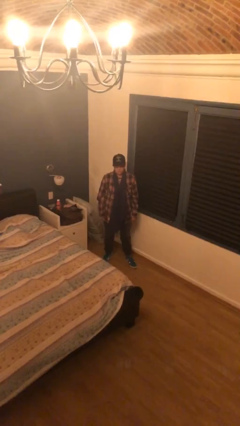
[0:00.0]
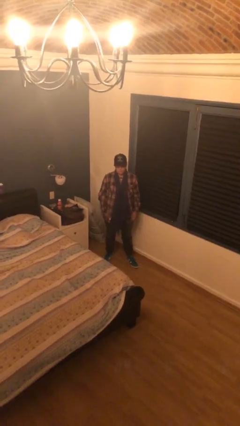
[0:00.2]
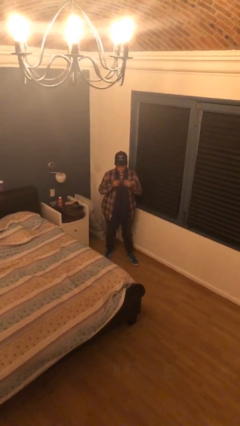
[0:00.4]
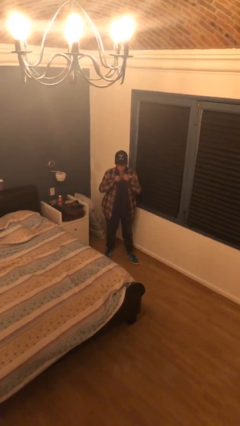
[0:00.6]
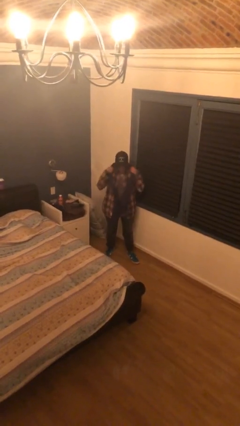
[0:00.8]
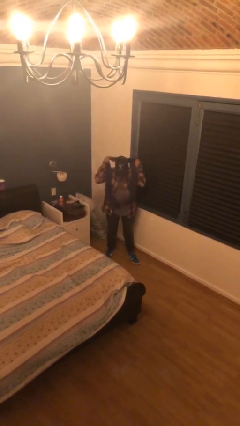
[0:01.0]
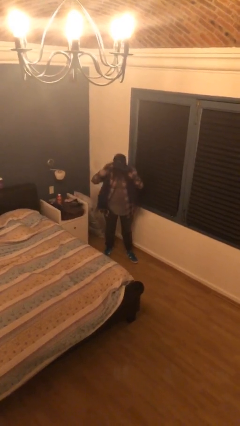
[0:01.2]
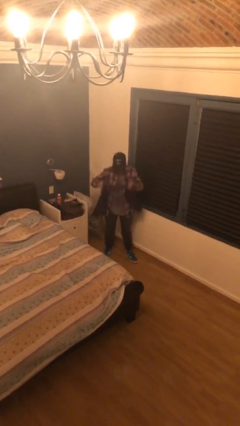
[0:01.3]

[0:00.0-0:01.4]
person takes off scarf

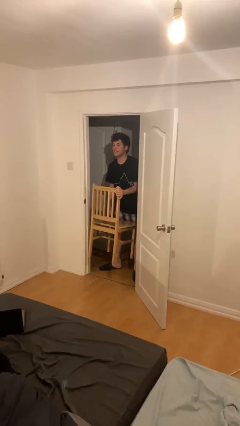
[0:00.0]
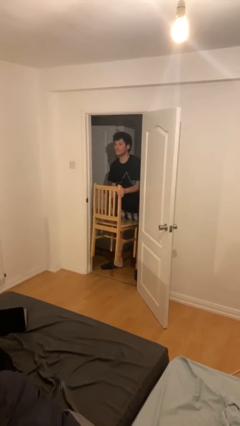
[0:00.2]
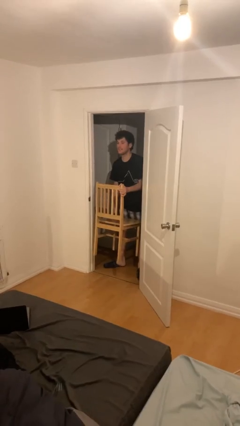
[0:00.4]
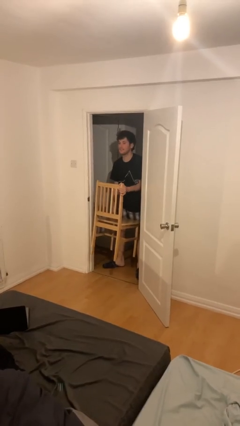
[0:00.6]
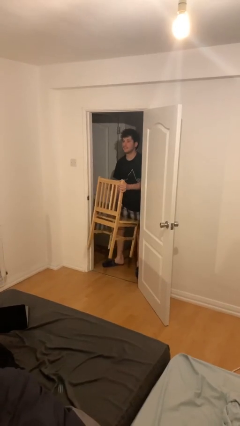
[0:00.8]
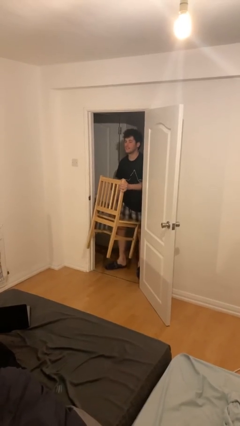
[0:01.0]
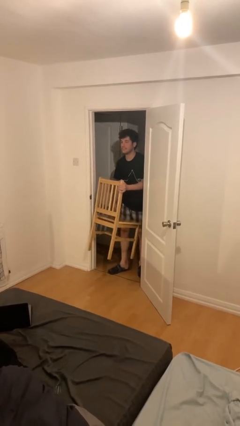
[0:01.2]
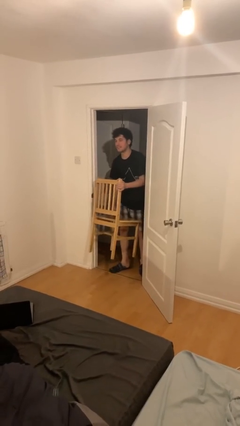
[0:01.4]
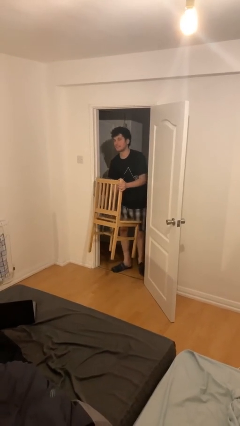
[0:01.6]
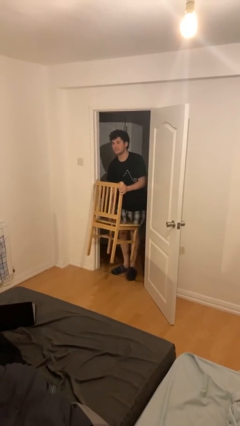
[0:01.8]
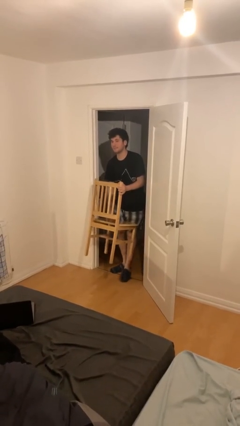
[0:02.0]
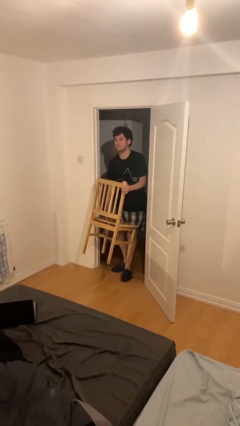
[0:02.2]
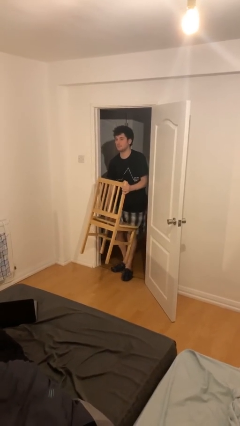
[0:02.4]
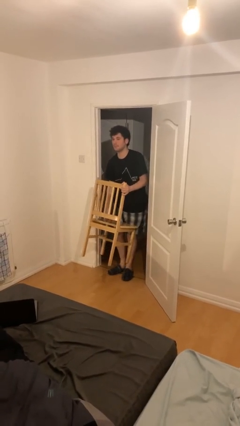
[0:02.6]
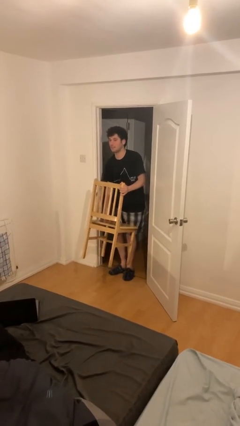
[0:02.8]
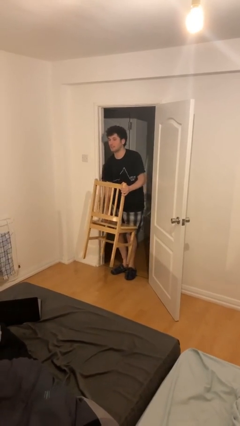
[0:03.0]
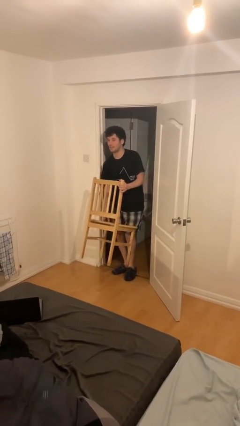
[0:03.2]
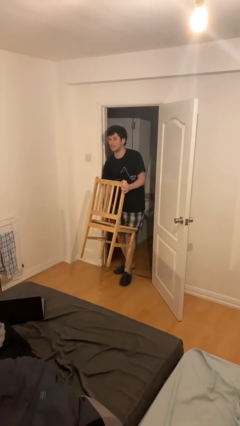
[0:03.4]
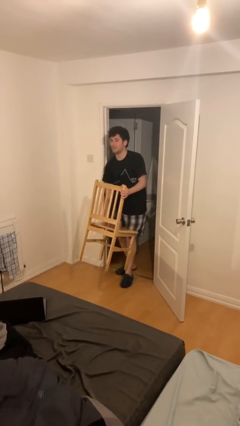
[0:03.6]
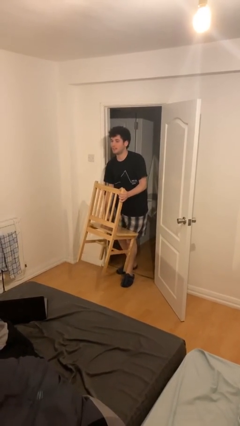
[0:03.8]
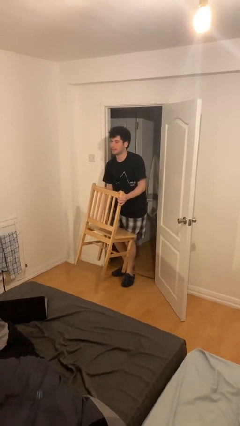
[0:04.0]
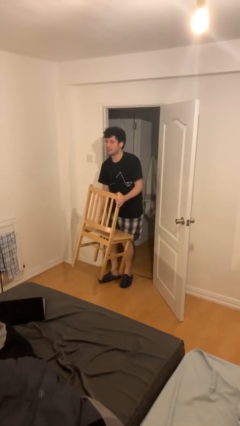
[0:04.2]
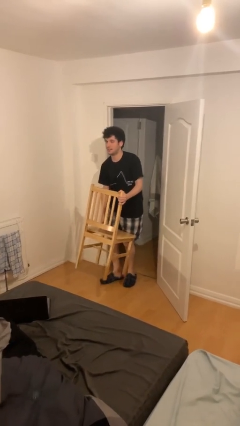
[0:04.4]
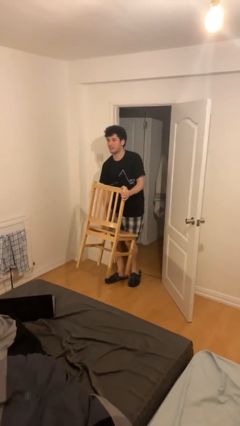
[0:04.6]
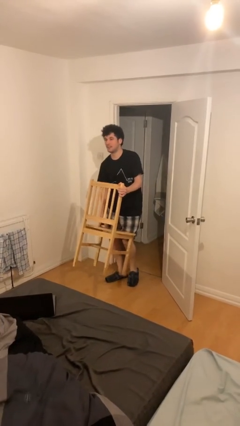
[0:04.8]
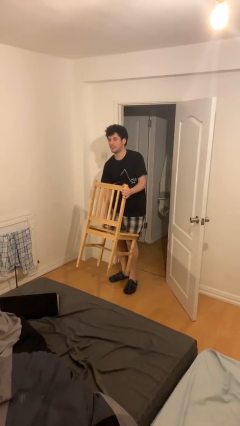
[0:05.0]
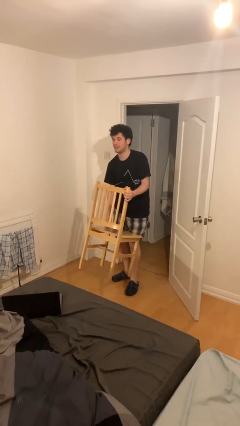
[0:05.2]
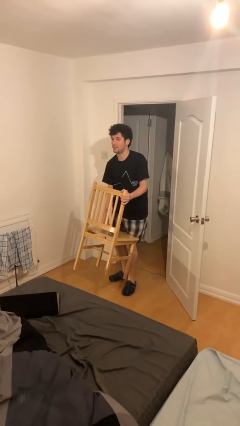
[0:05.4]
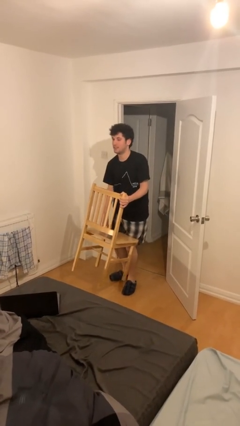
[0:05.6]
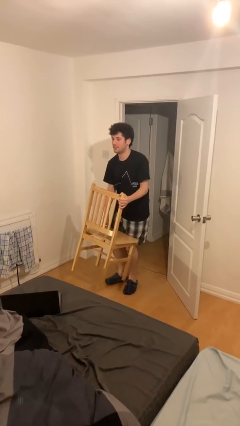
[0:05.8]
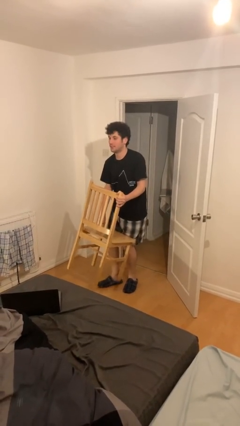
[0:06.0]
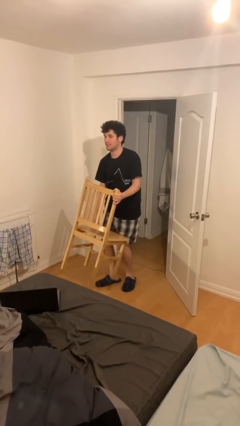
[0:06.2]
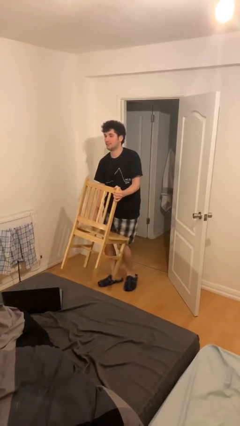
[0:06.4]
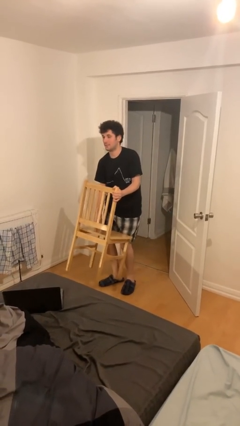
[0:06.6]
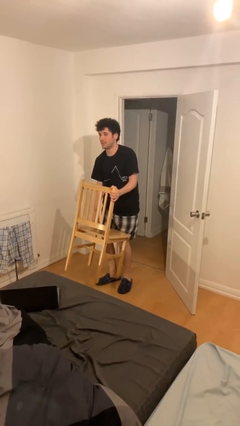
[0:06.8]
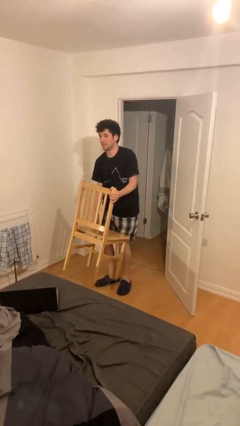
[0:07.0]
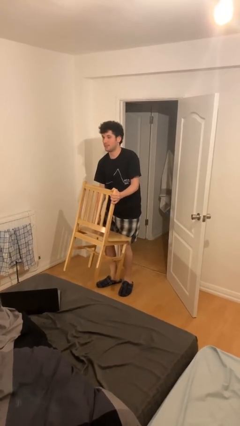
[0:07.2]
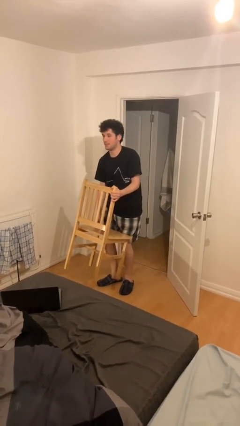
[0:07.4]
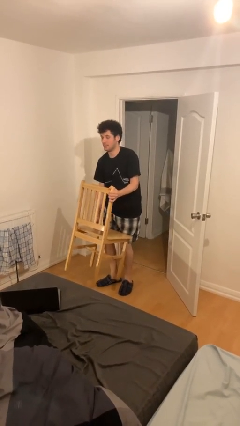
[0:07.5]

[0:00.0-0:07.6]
person carries heavy object

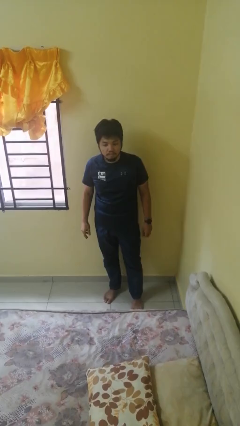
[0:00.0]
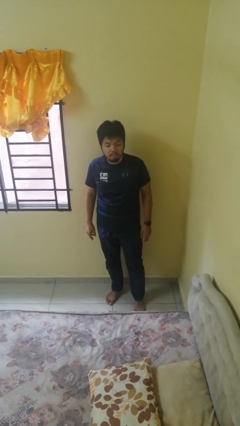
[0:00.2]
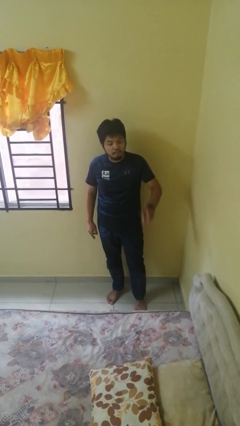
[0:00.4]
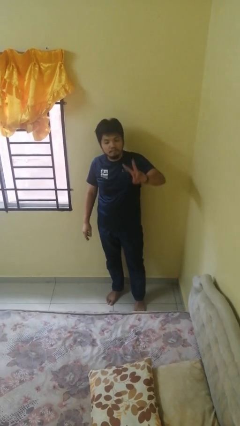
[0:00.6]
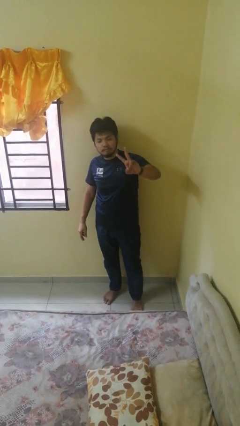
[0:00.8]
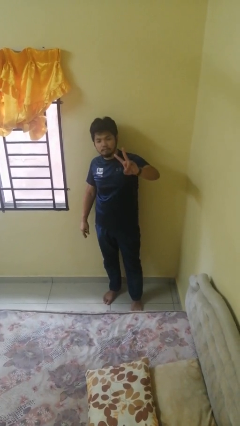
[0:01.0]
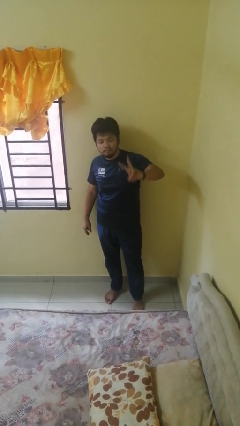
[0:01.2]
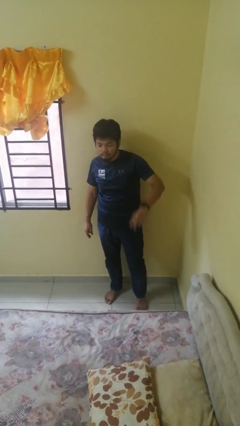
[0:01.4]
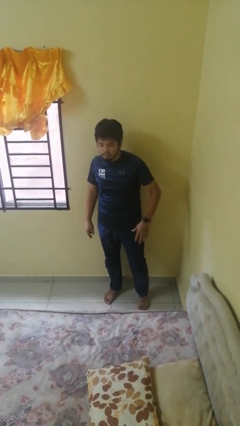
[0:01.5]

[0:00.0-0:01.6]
person gestures peace

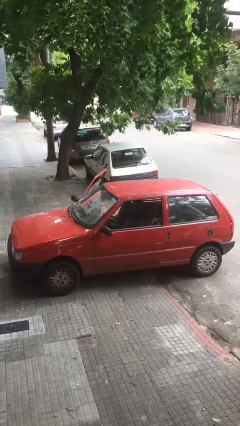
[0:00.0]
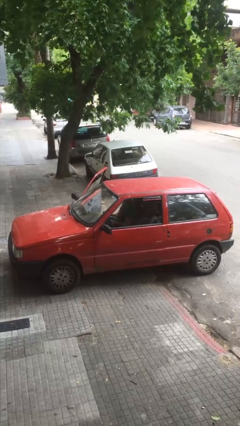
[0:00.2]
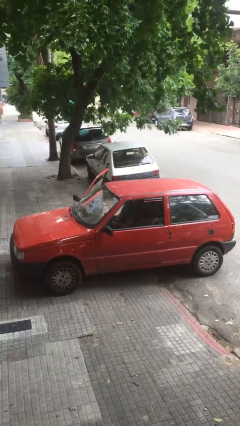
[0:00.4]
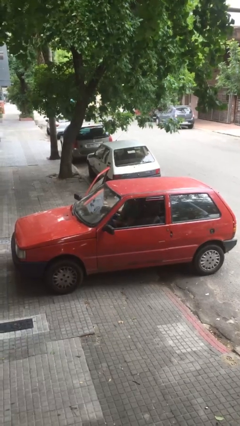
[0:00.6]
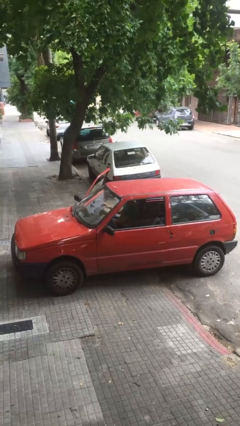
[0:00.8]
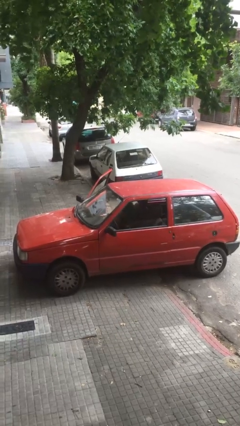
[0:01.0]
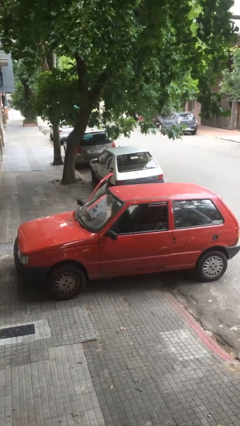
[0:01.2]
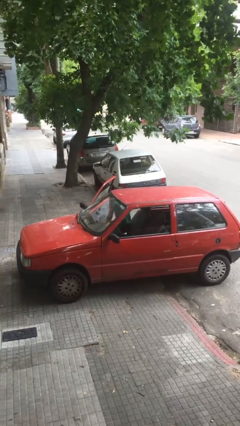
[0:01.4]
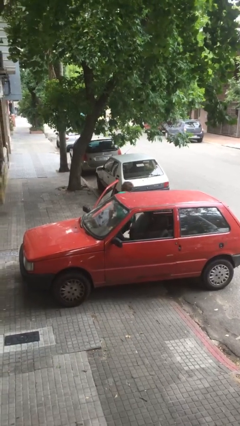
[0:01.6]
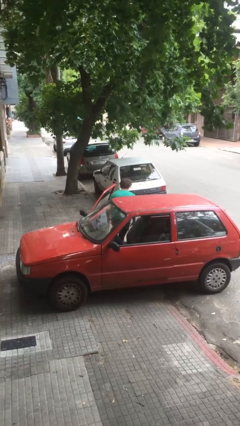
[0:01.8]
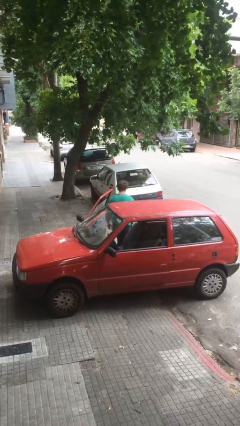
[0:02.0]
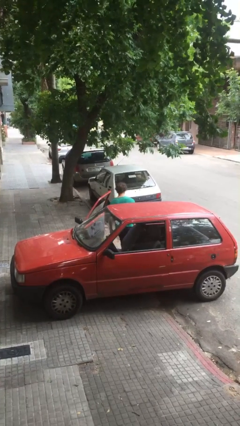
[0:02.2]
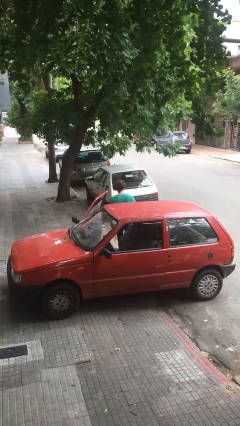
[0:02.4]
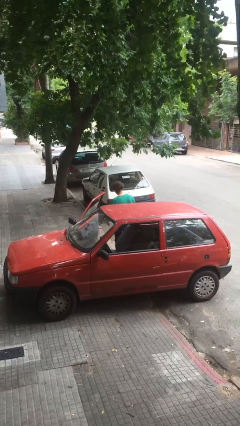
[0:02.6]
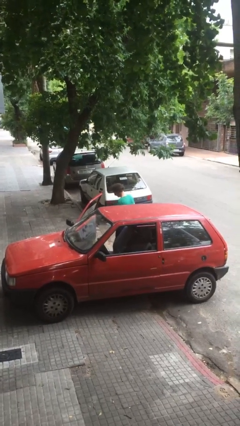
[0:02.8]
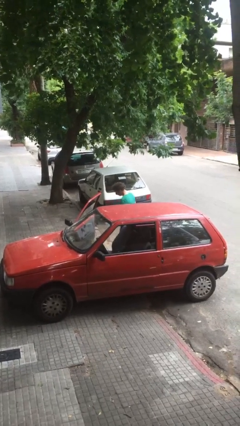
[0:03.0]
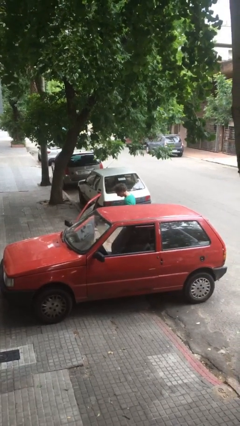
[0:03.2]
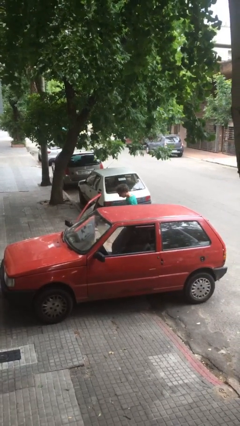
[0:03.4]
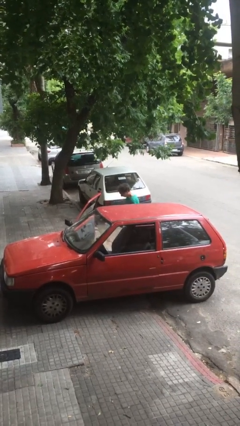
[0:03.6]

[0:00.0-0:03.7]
person exits car

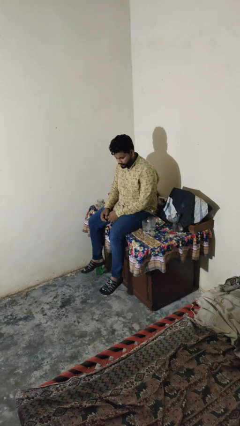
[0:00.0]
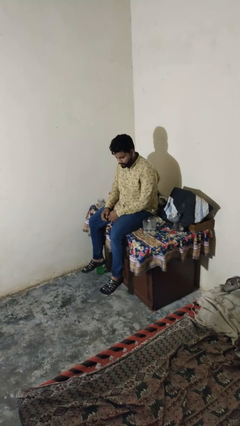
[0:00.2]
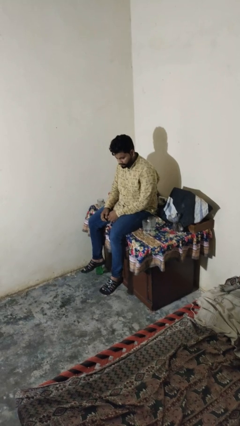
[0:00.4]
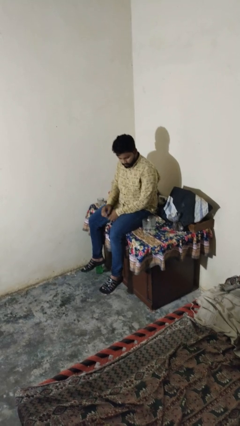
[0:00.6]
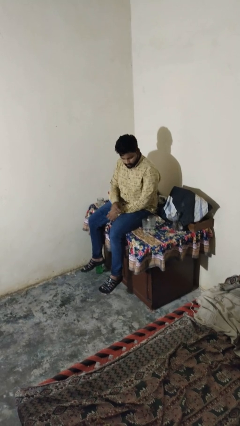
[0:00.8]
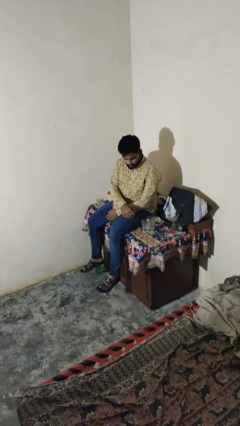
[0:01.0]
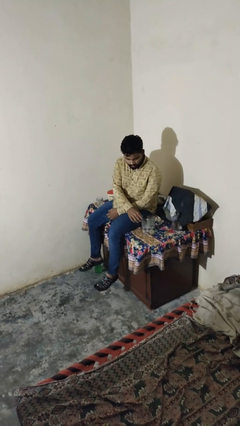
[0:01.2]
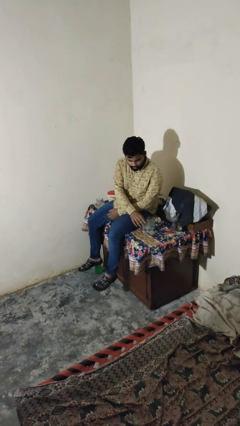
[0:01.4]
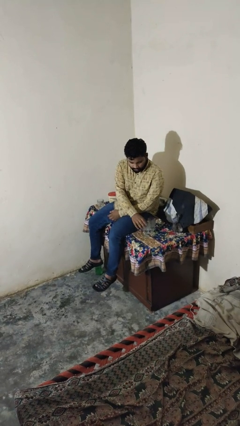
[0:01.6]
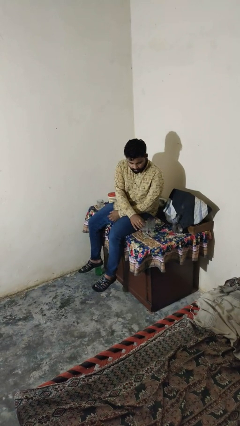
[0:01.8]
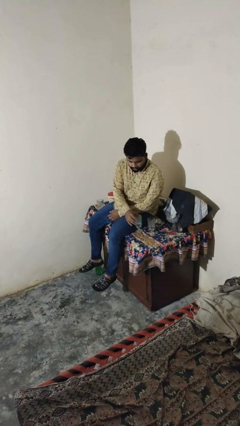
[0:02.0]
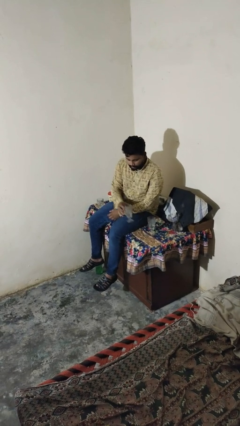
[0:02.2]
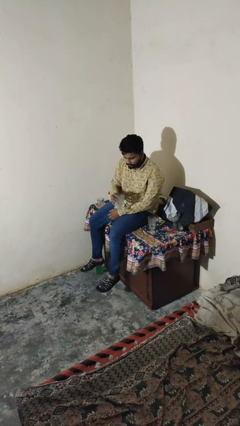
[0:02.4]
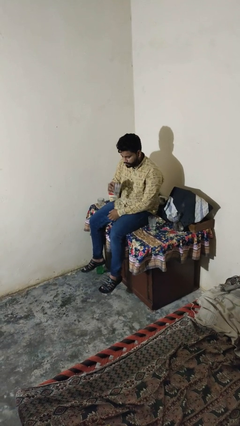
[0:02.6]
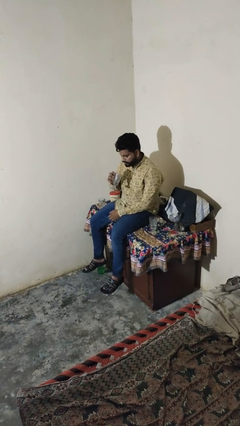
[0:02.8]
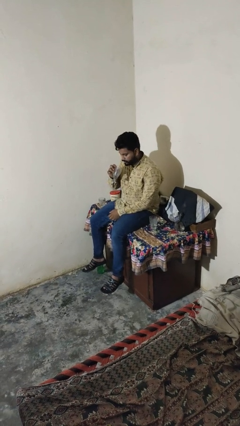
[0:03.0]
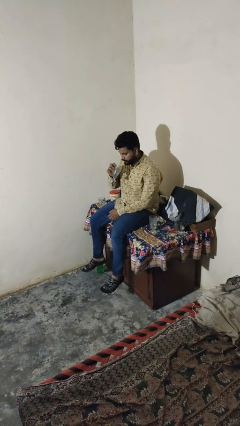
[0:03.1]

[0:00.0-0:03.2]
person picks up object from table

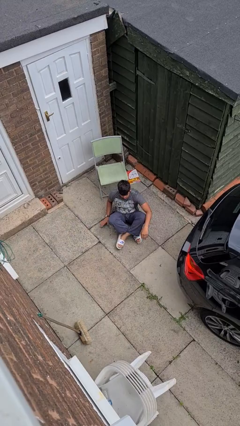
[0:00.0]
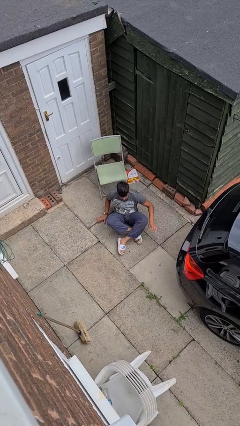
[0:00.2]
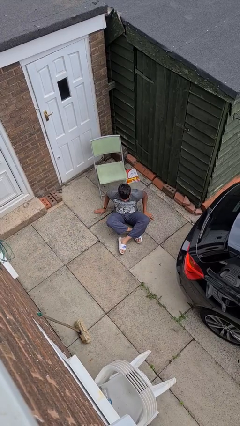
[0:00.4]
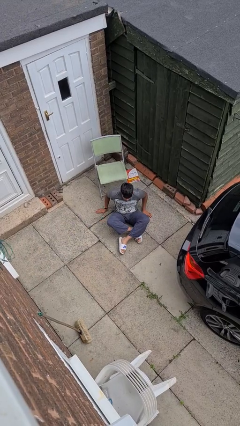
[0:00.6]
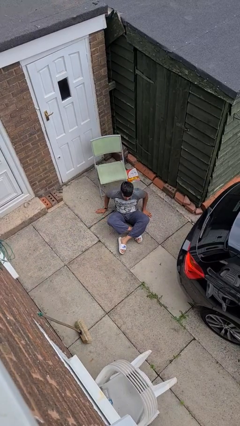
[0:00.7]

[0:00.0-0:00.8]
person stands up from floor
